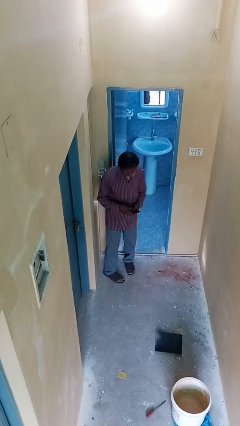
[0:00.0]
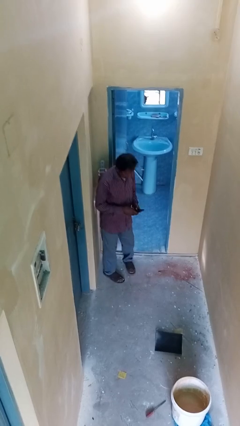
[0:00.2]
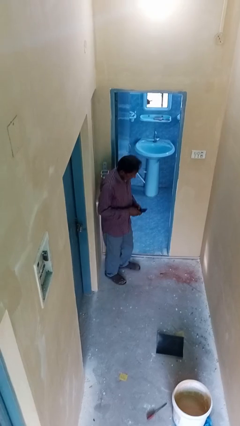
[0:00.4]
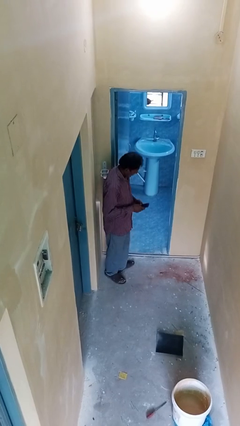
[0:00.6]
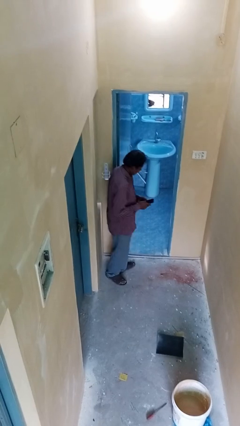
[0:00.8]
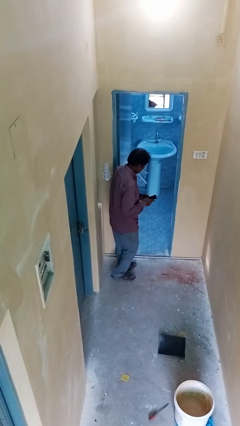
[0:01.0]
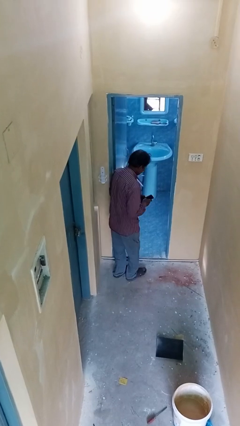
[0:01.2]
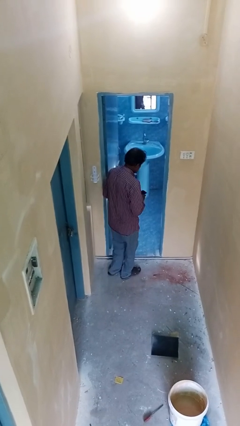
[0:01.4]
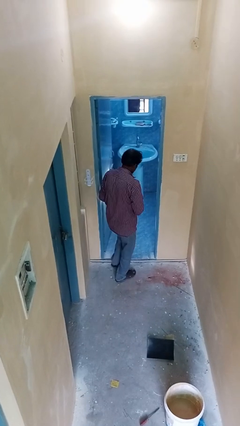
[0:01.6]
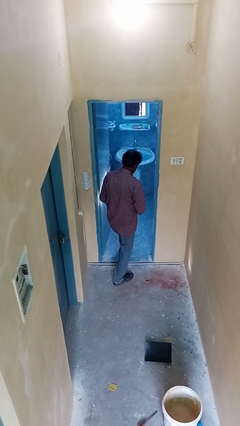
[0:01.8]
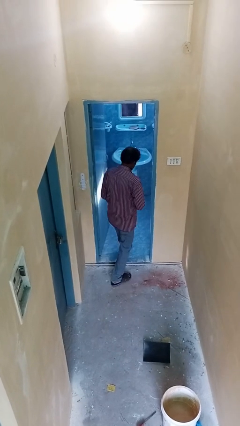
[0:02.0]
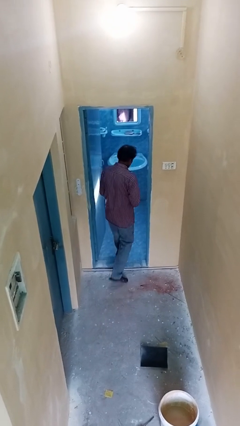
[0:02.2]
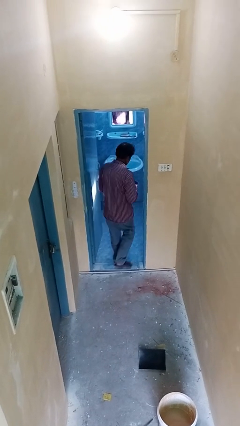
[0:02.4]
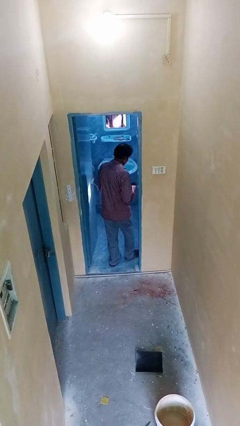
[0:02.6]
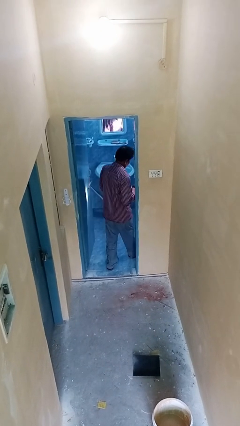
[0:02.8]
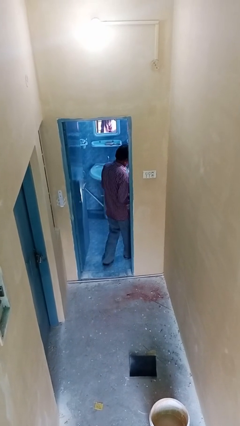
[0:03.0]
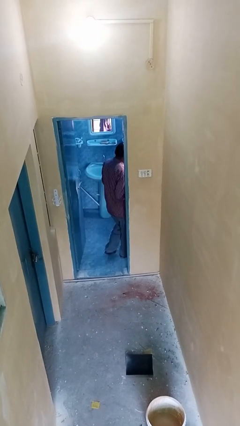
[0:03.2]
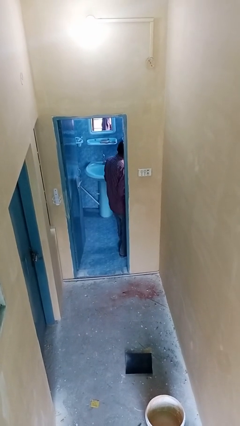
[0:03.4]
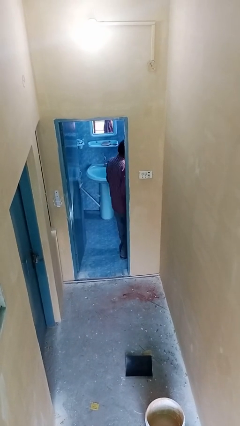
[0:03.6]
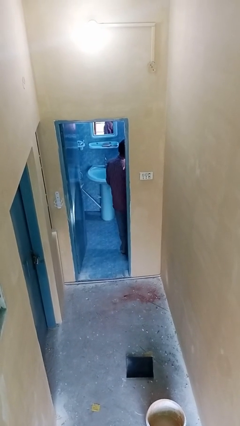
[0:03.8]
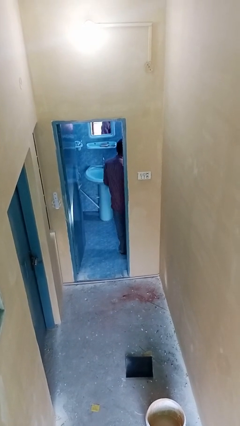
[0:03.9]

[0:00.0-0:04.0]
person exits scene through structure

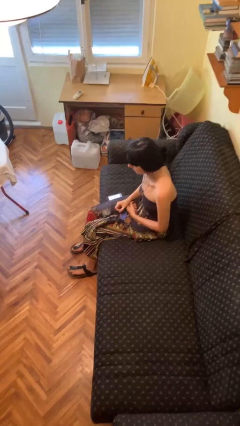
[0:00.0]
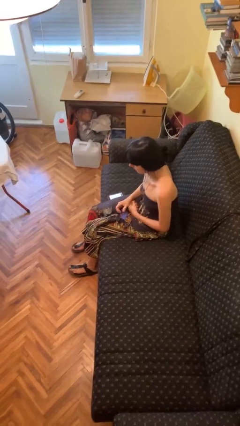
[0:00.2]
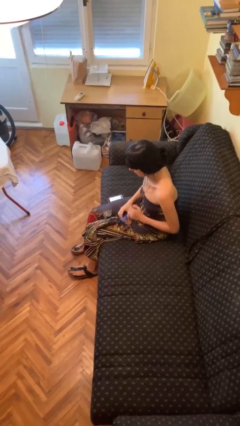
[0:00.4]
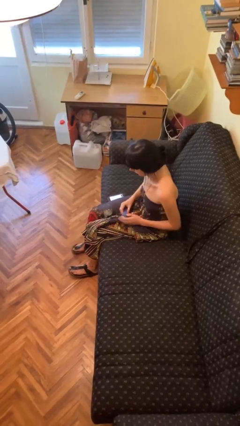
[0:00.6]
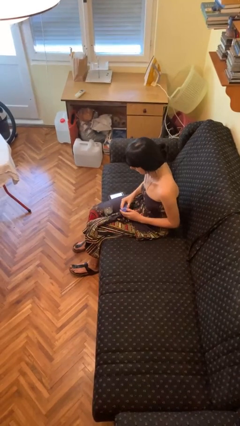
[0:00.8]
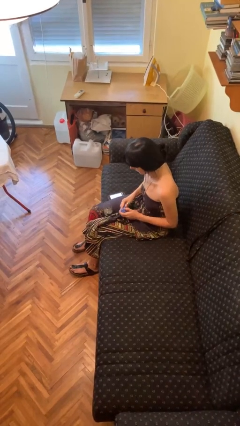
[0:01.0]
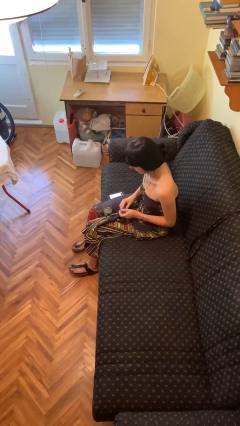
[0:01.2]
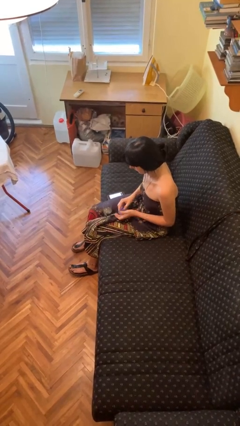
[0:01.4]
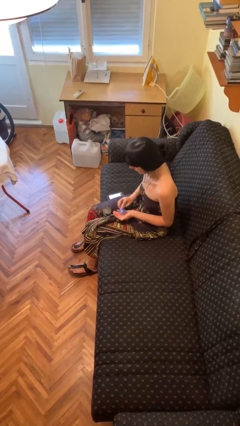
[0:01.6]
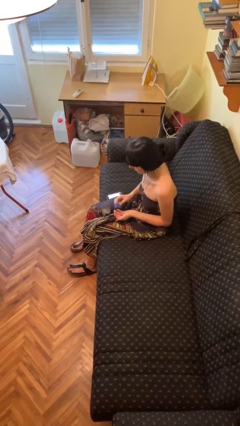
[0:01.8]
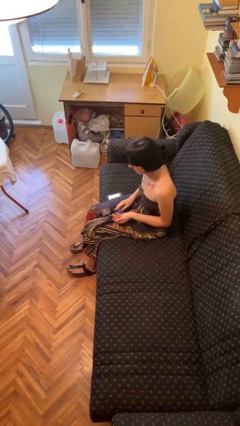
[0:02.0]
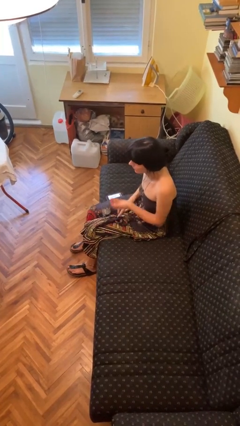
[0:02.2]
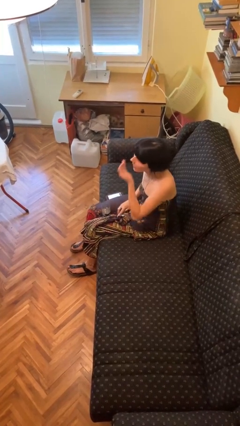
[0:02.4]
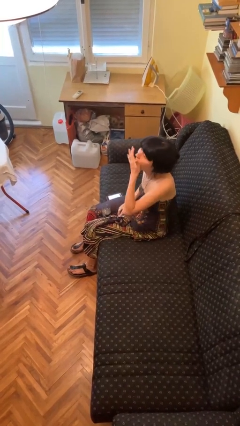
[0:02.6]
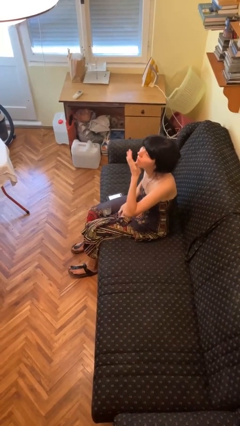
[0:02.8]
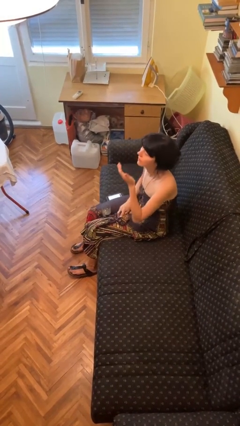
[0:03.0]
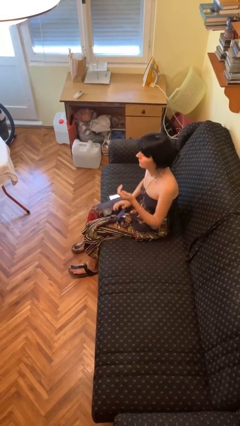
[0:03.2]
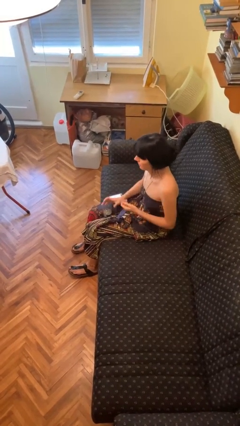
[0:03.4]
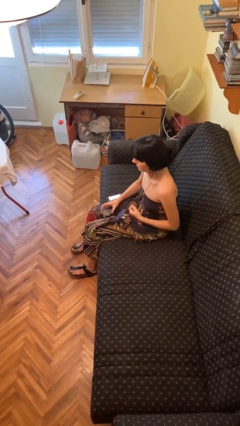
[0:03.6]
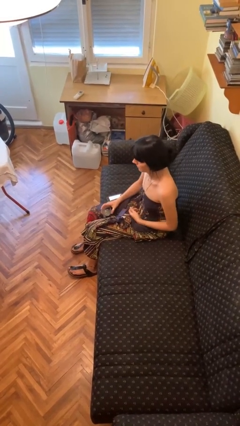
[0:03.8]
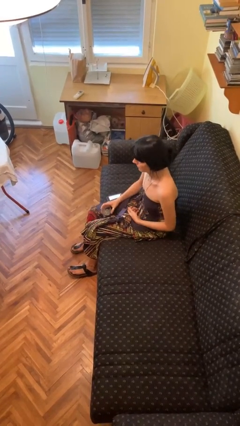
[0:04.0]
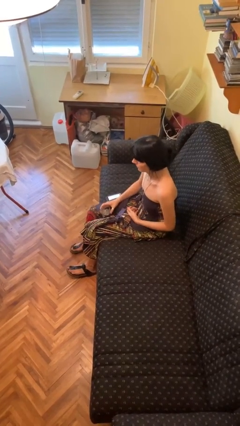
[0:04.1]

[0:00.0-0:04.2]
person takes medicine pills

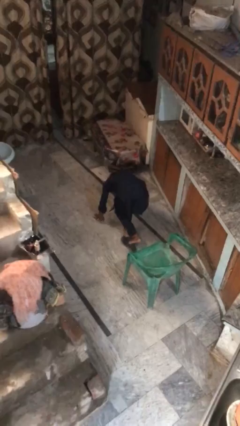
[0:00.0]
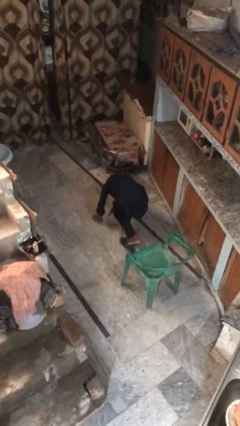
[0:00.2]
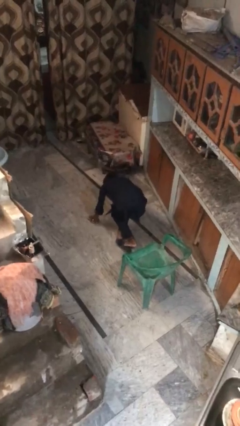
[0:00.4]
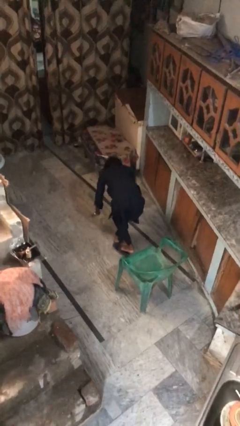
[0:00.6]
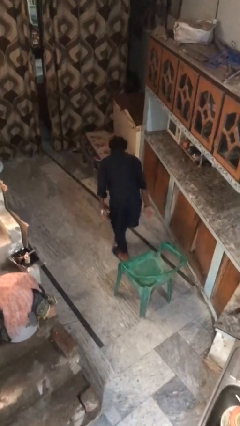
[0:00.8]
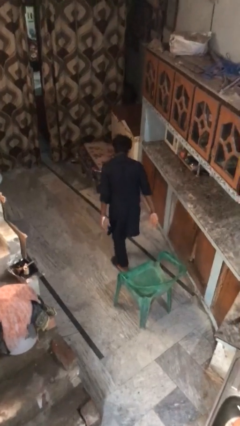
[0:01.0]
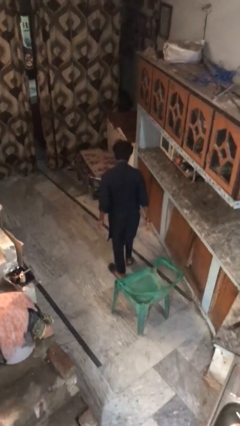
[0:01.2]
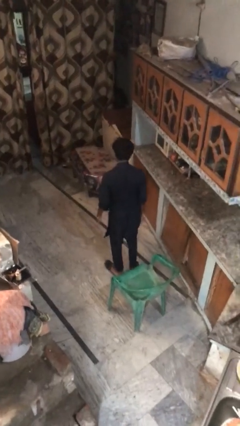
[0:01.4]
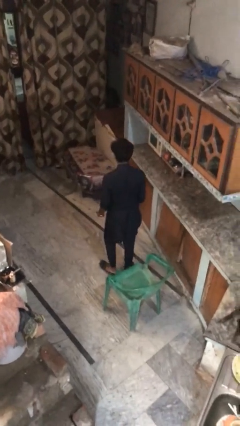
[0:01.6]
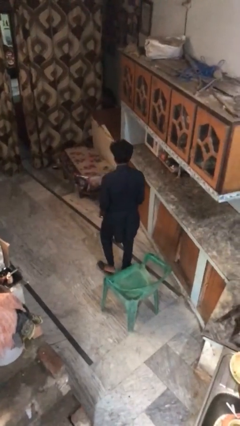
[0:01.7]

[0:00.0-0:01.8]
person stands up from floor

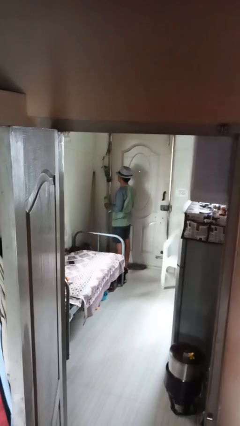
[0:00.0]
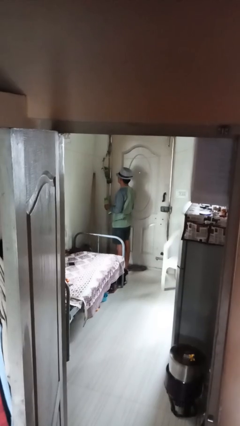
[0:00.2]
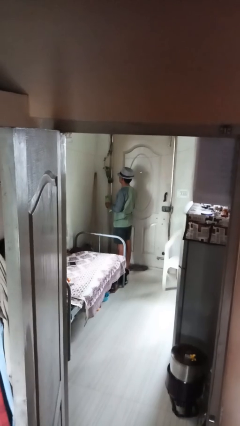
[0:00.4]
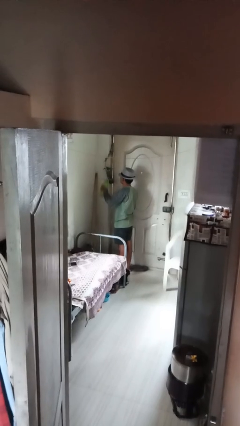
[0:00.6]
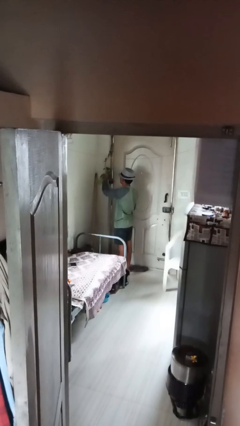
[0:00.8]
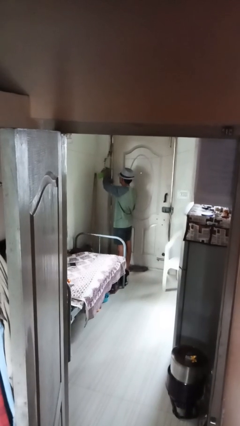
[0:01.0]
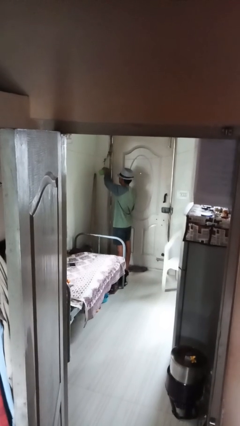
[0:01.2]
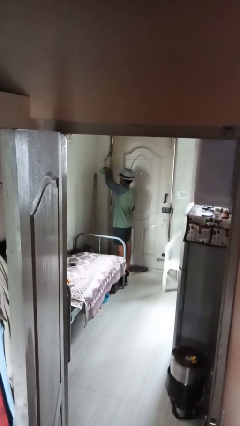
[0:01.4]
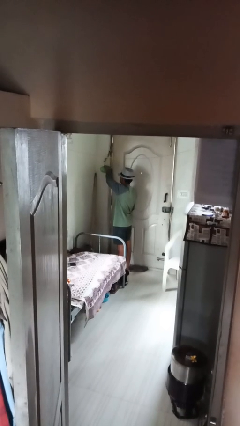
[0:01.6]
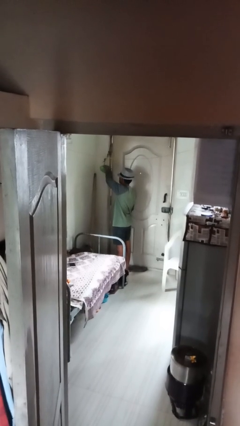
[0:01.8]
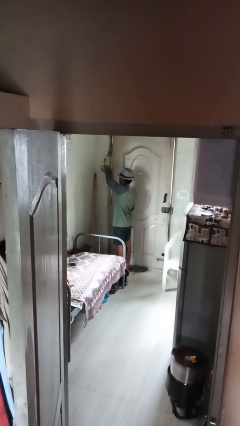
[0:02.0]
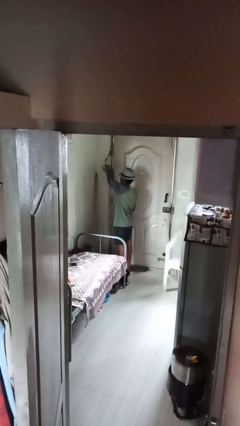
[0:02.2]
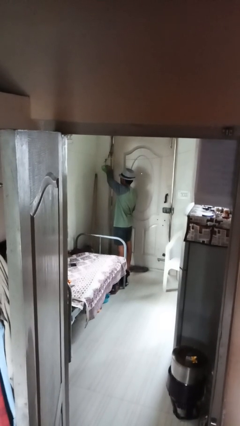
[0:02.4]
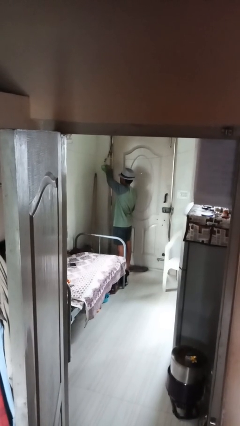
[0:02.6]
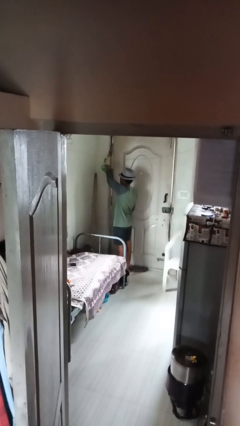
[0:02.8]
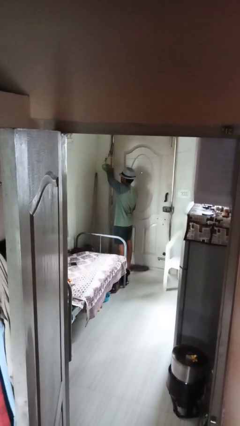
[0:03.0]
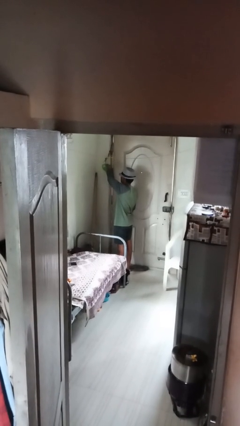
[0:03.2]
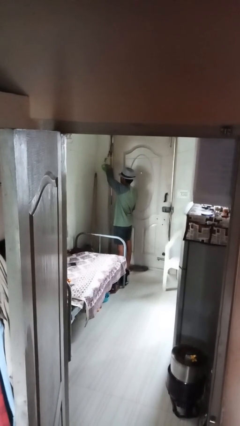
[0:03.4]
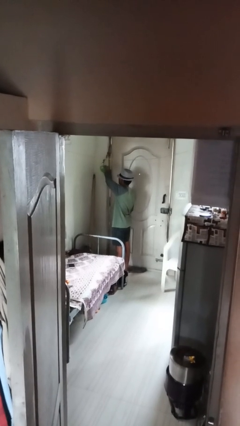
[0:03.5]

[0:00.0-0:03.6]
person waters houseplant

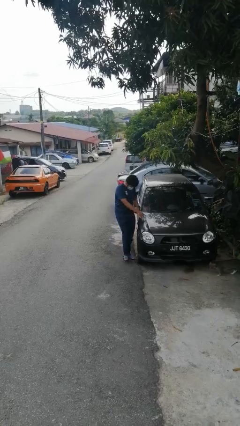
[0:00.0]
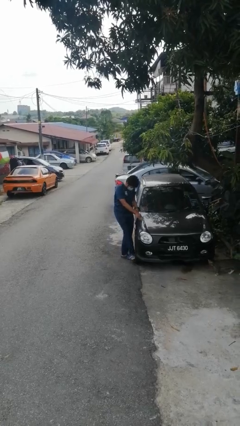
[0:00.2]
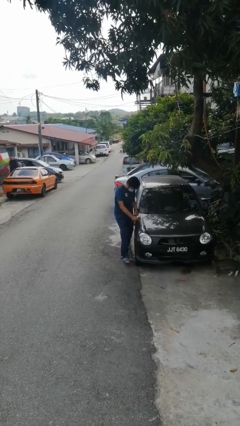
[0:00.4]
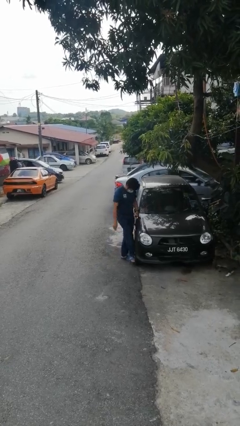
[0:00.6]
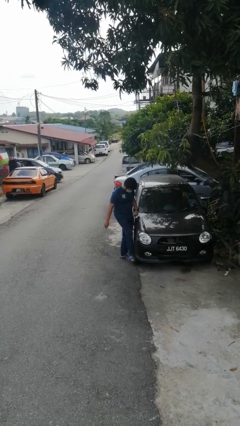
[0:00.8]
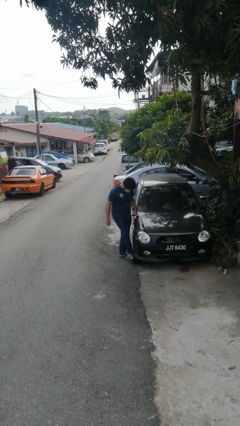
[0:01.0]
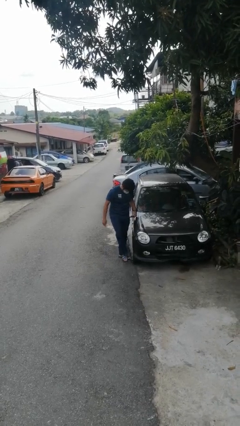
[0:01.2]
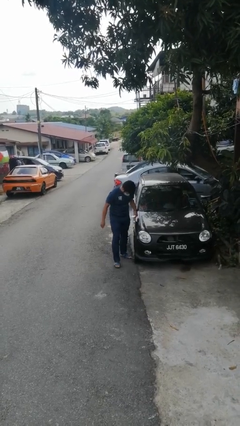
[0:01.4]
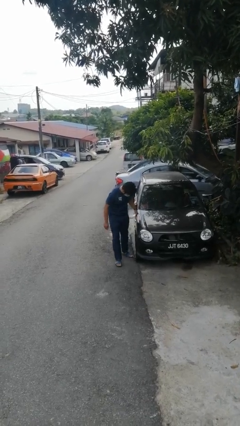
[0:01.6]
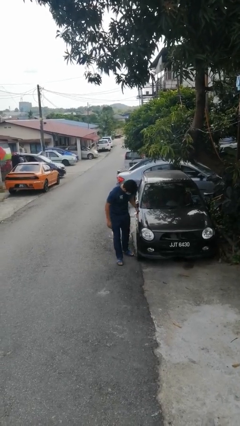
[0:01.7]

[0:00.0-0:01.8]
person kicks car tires

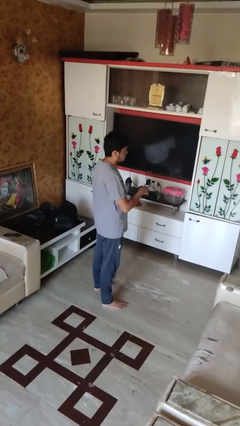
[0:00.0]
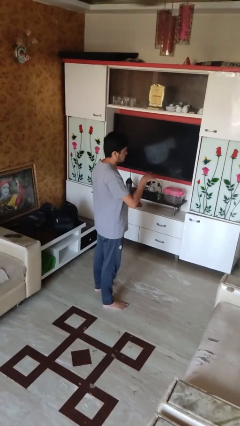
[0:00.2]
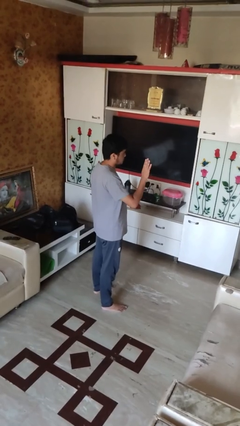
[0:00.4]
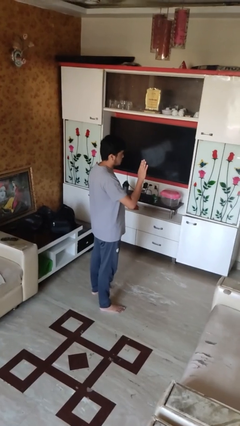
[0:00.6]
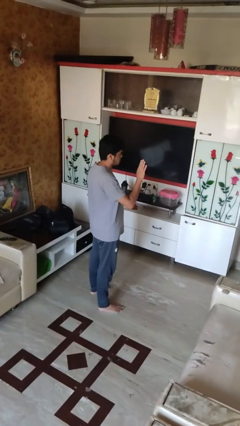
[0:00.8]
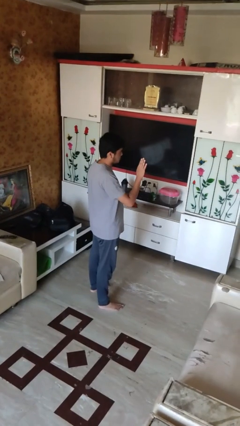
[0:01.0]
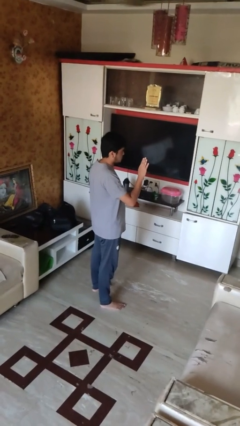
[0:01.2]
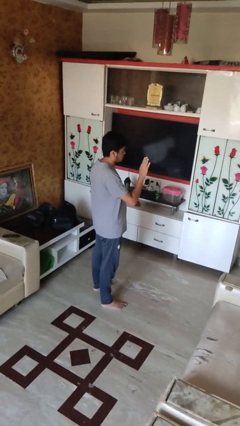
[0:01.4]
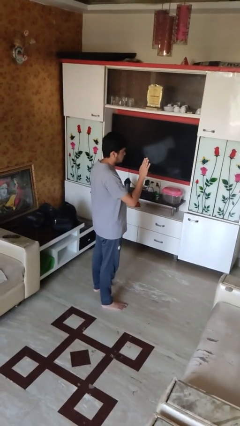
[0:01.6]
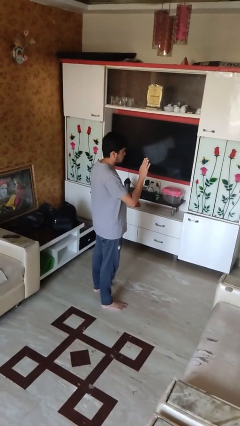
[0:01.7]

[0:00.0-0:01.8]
person gestures swipe up
